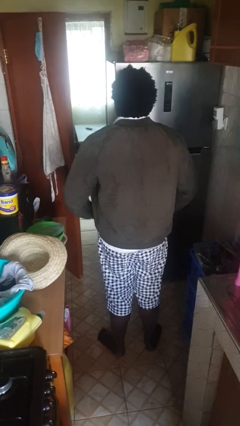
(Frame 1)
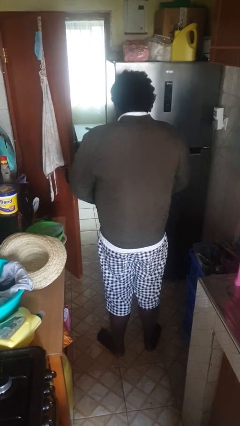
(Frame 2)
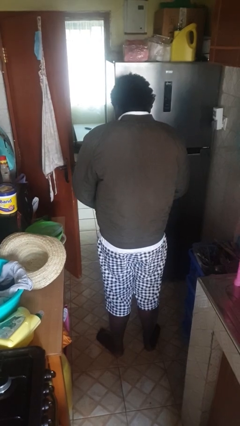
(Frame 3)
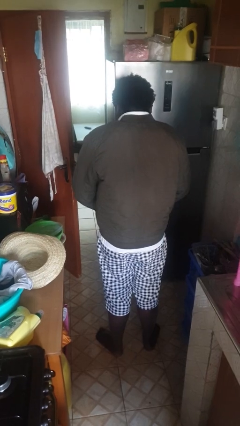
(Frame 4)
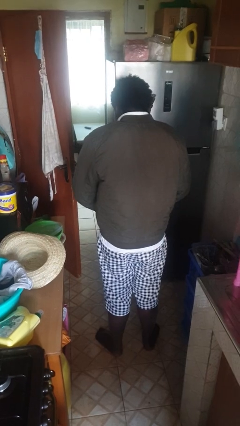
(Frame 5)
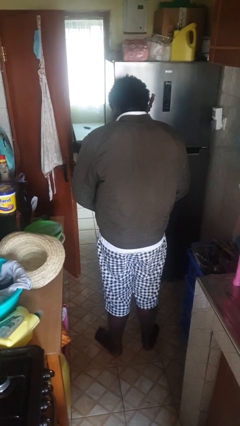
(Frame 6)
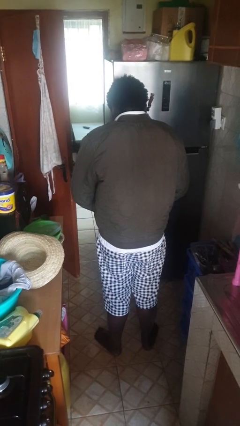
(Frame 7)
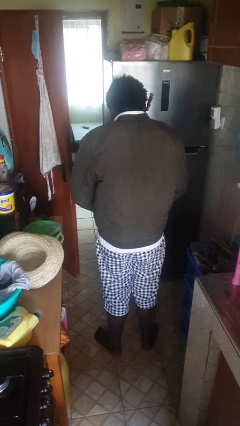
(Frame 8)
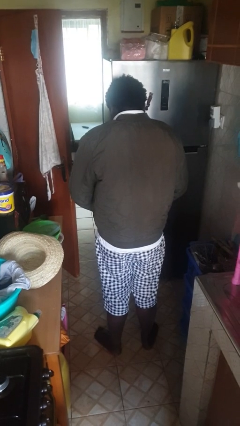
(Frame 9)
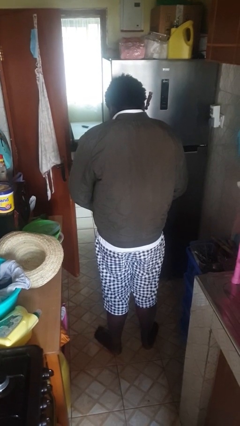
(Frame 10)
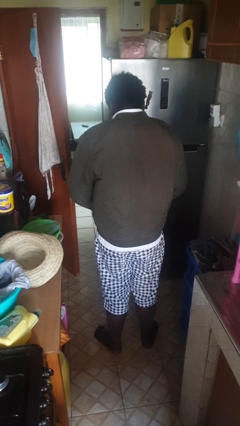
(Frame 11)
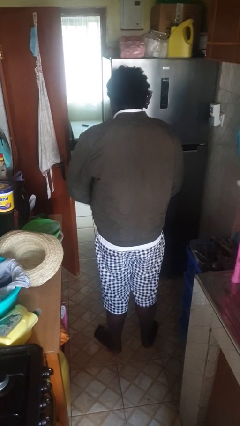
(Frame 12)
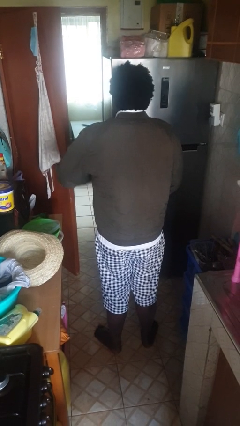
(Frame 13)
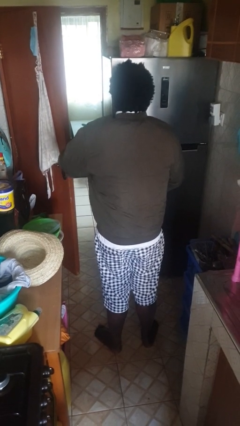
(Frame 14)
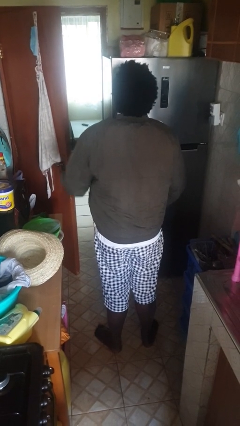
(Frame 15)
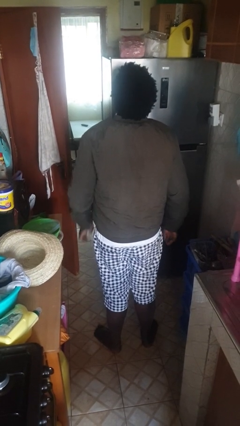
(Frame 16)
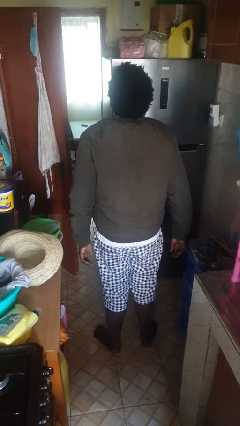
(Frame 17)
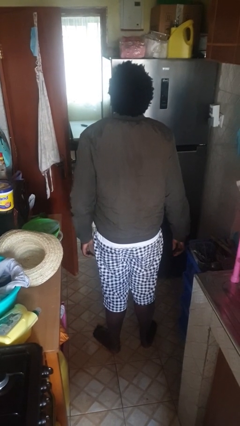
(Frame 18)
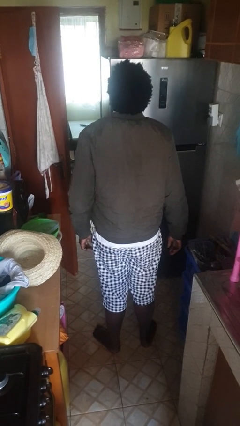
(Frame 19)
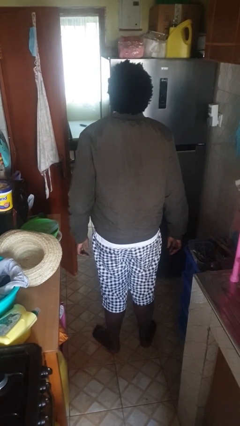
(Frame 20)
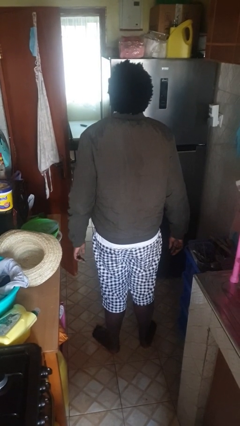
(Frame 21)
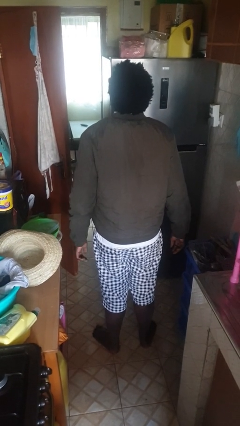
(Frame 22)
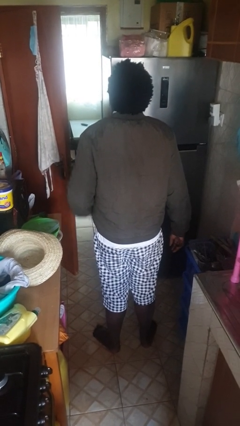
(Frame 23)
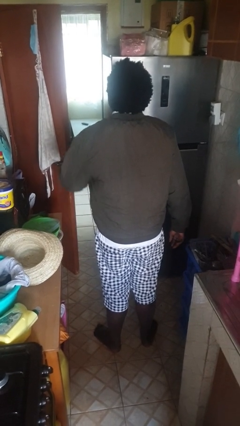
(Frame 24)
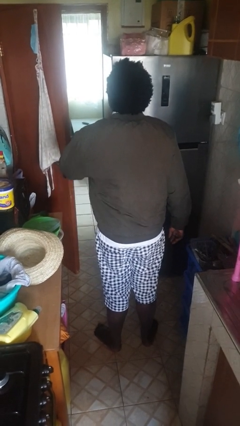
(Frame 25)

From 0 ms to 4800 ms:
person zips up jacket

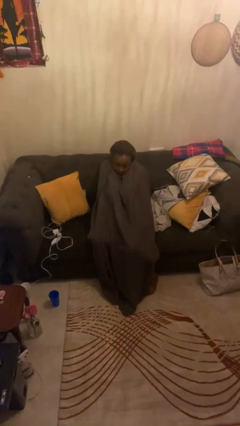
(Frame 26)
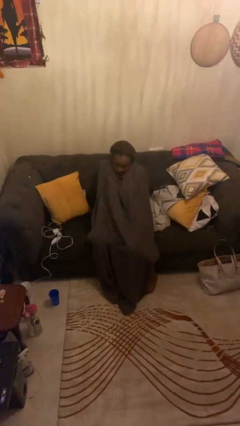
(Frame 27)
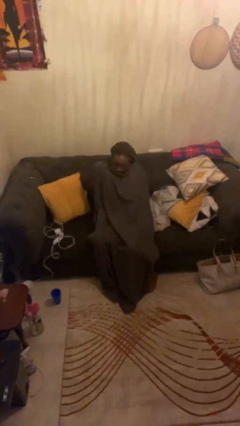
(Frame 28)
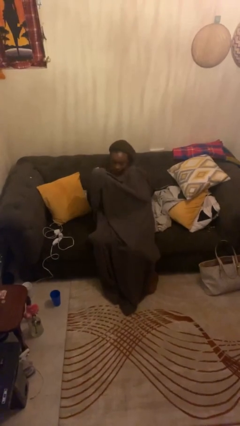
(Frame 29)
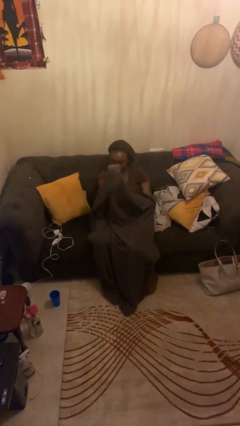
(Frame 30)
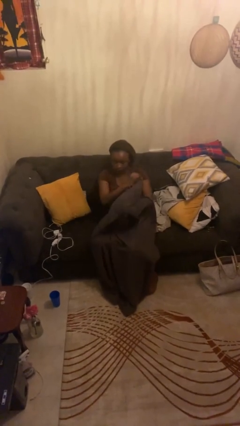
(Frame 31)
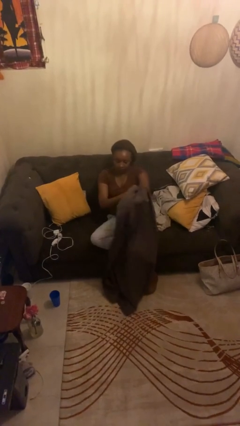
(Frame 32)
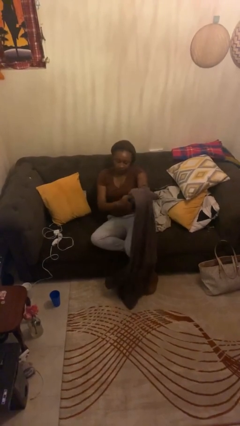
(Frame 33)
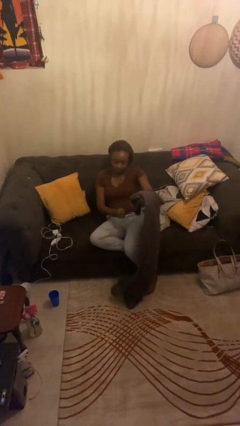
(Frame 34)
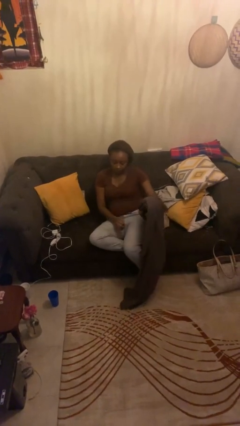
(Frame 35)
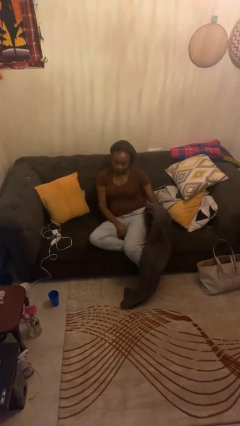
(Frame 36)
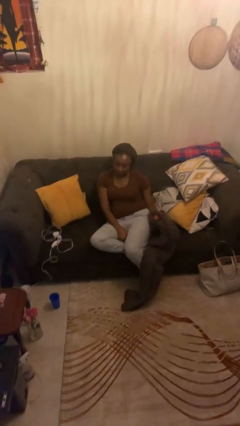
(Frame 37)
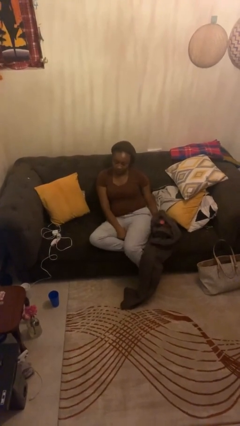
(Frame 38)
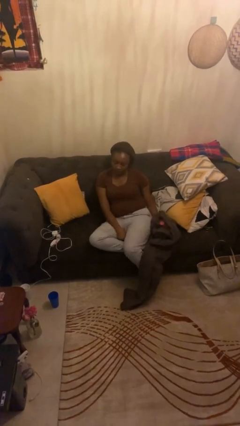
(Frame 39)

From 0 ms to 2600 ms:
person uncovers with blanket

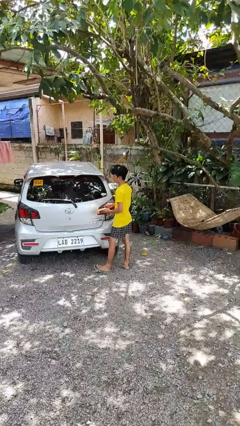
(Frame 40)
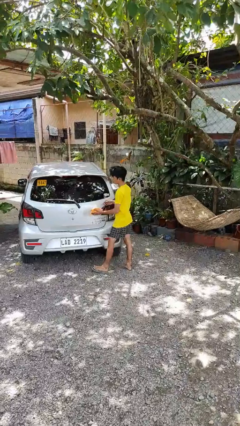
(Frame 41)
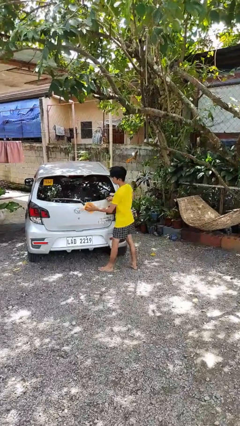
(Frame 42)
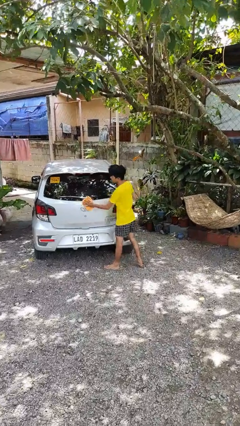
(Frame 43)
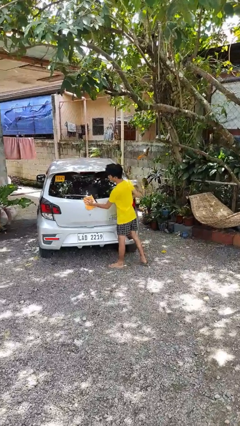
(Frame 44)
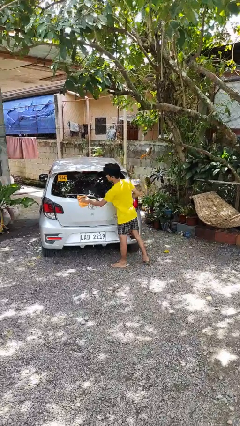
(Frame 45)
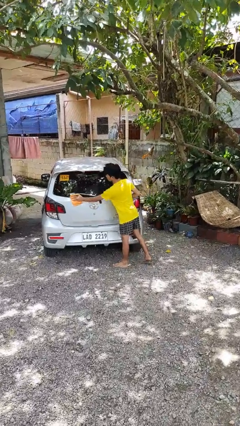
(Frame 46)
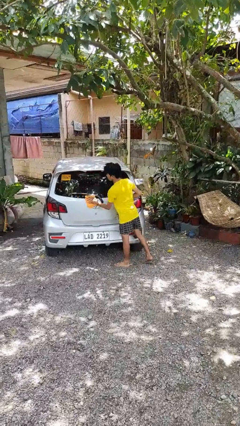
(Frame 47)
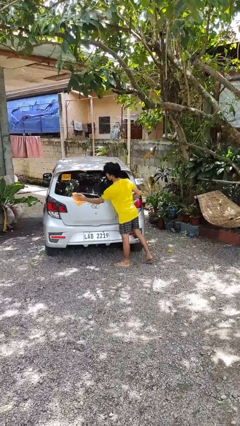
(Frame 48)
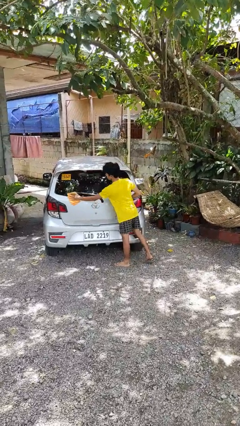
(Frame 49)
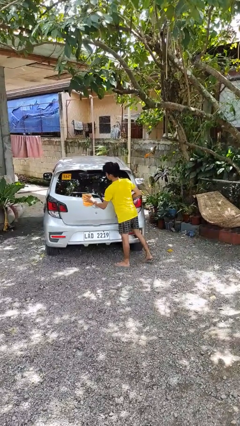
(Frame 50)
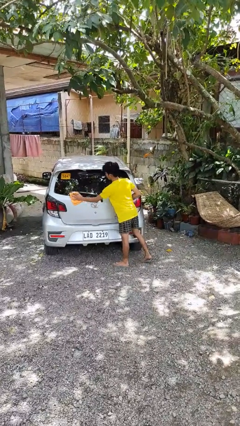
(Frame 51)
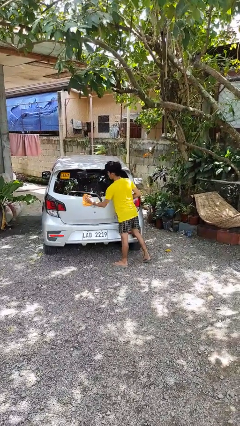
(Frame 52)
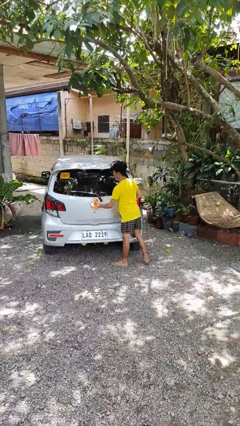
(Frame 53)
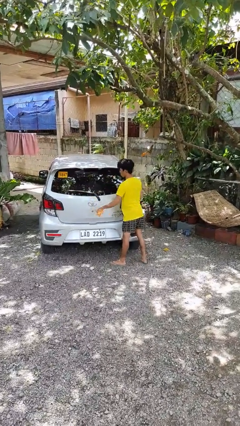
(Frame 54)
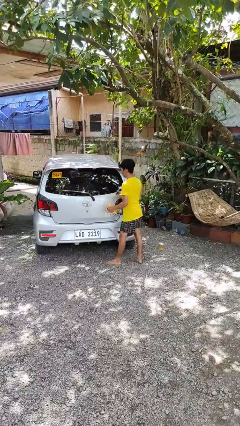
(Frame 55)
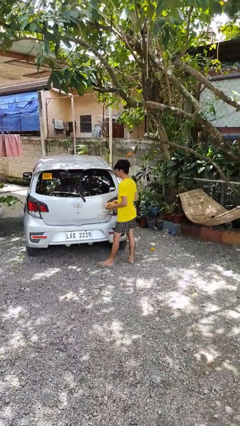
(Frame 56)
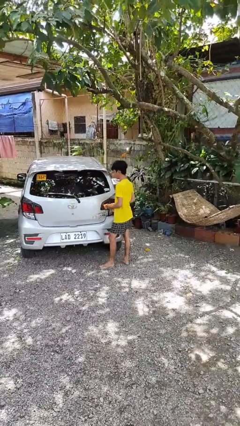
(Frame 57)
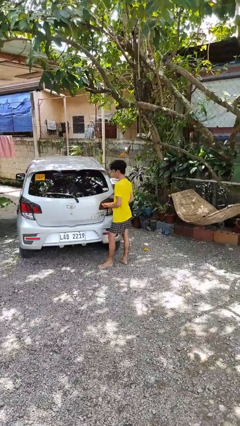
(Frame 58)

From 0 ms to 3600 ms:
person polishes car with rag

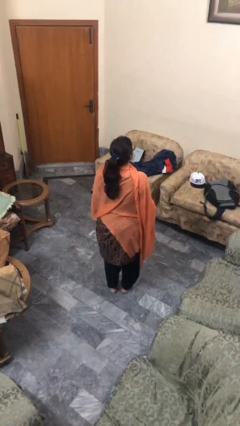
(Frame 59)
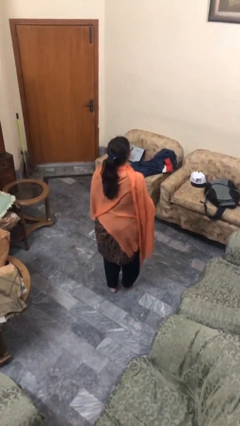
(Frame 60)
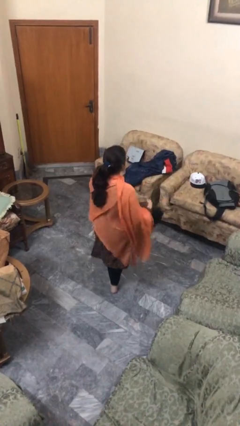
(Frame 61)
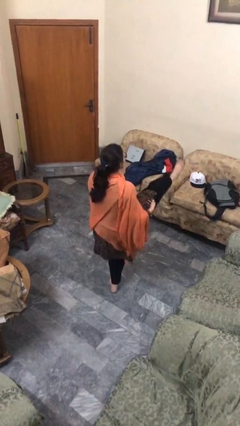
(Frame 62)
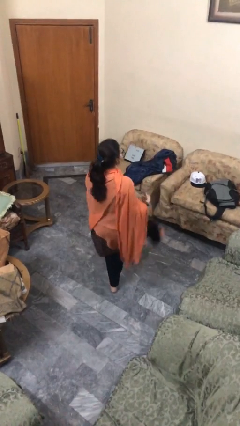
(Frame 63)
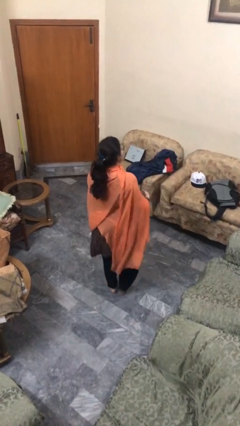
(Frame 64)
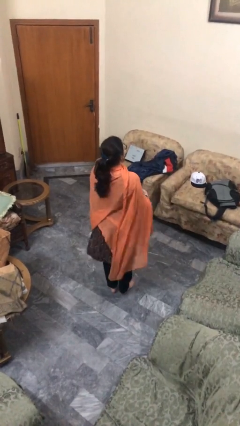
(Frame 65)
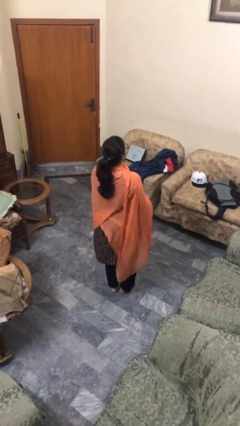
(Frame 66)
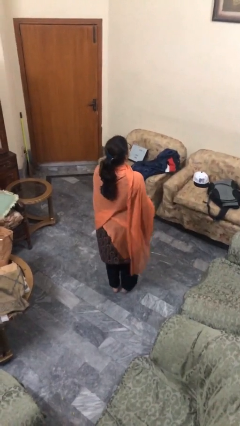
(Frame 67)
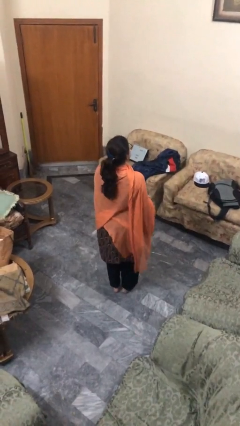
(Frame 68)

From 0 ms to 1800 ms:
person karate kicks

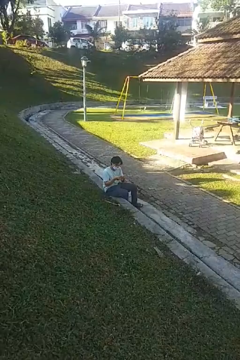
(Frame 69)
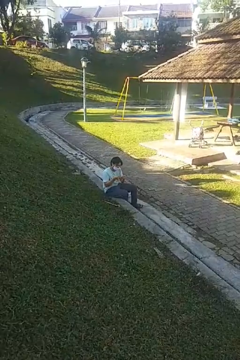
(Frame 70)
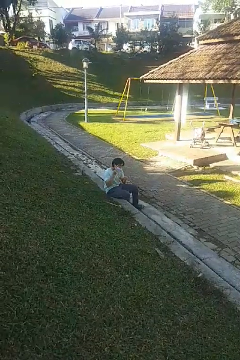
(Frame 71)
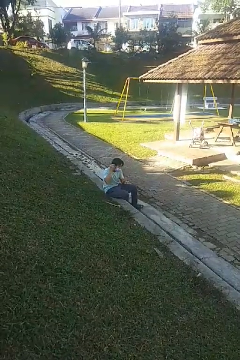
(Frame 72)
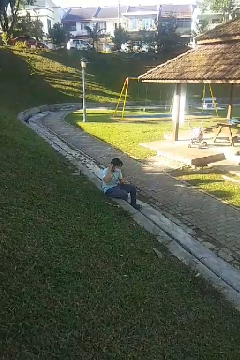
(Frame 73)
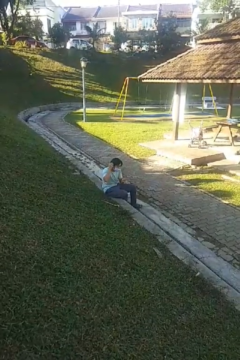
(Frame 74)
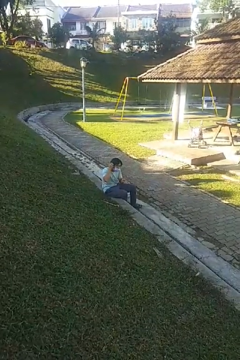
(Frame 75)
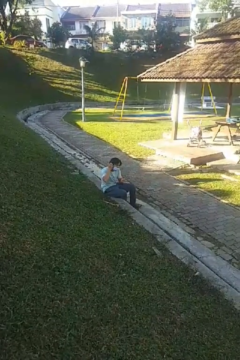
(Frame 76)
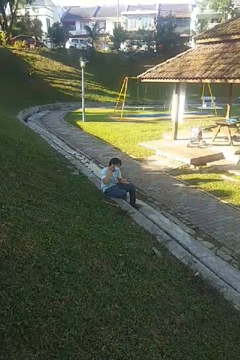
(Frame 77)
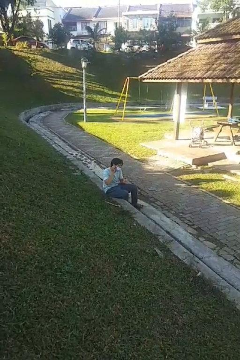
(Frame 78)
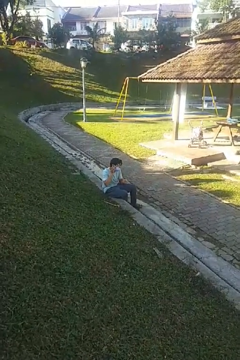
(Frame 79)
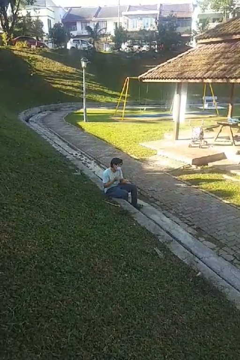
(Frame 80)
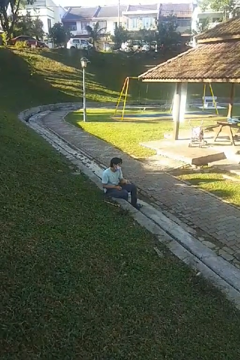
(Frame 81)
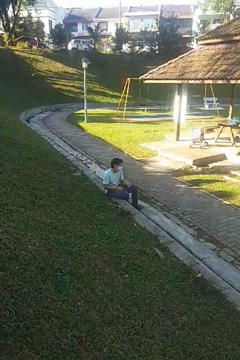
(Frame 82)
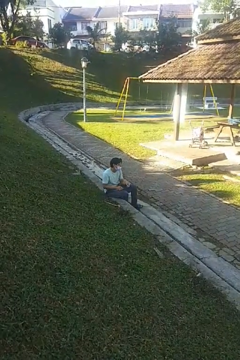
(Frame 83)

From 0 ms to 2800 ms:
person puts on earrings

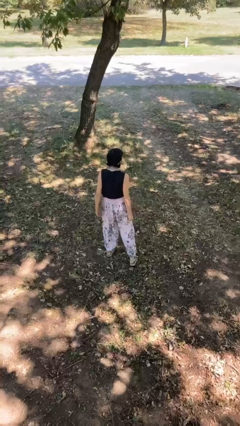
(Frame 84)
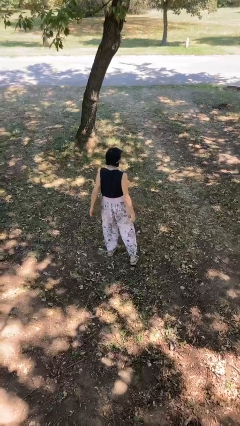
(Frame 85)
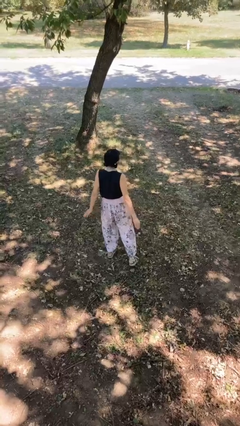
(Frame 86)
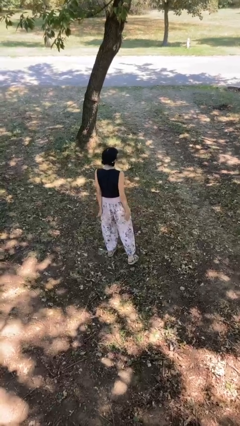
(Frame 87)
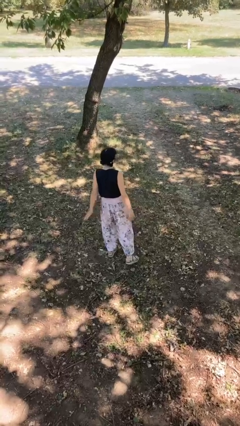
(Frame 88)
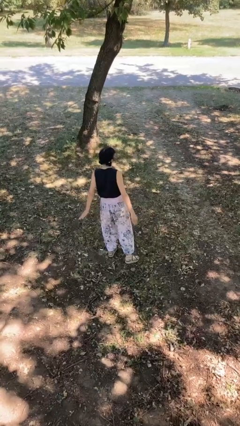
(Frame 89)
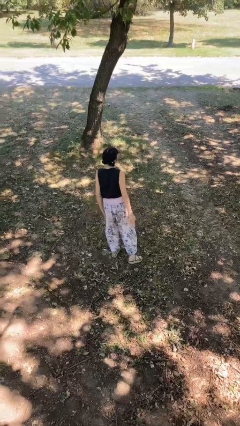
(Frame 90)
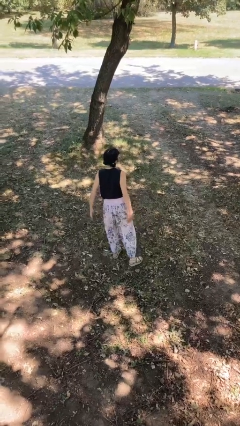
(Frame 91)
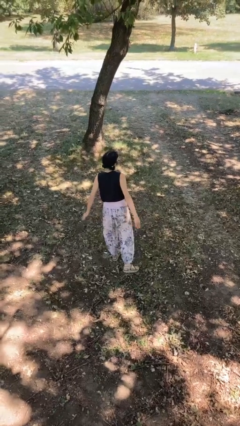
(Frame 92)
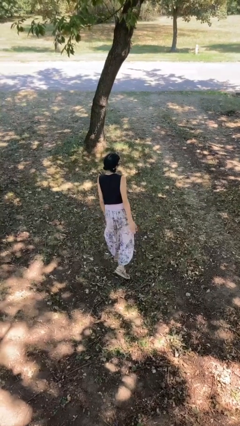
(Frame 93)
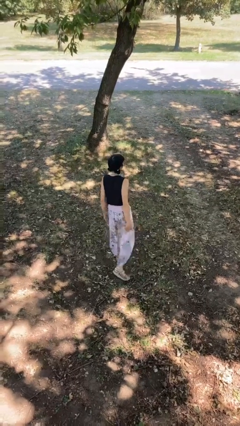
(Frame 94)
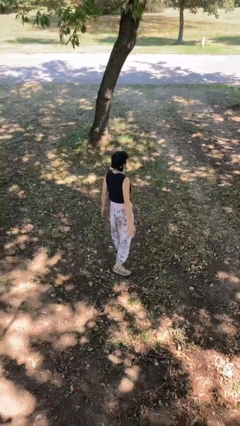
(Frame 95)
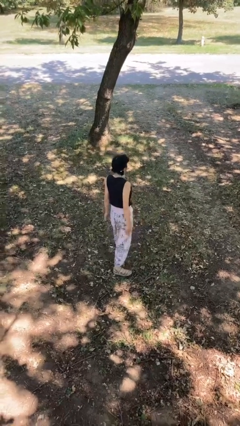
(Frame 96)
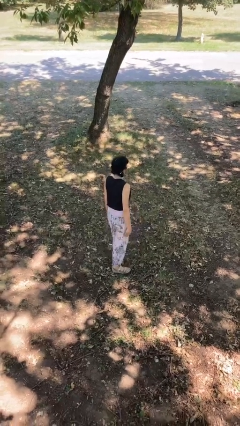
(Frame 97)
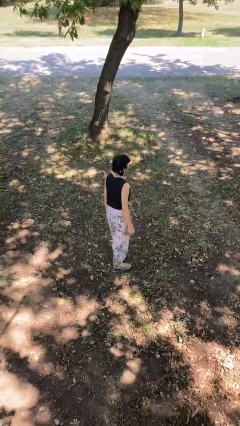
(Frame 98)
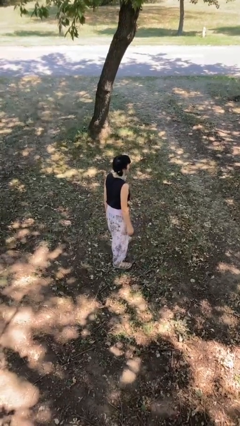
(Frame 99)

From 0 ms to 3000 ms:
person slaps hands on thighs
